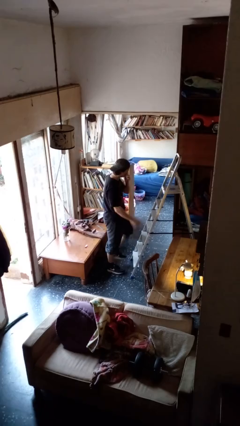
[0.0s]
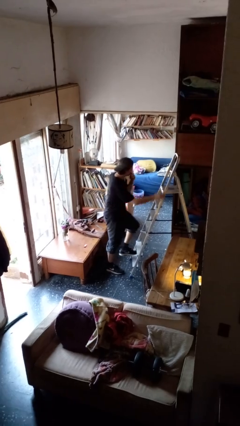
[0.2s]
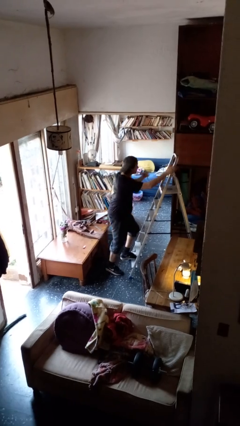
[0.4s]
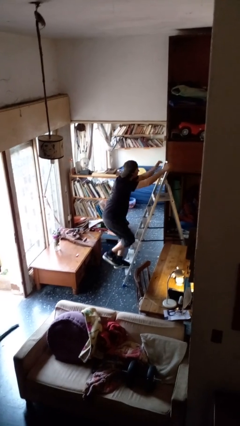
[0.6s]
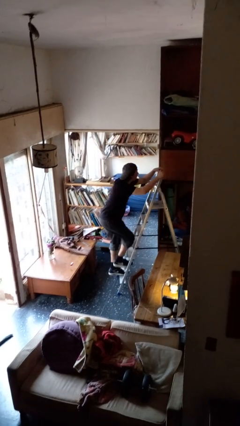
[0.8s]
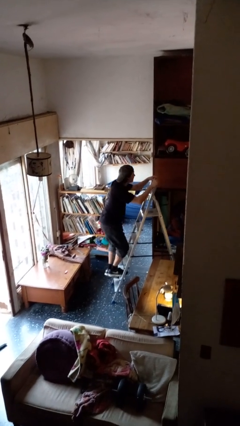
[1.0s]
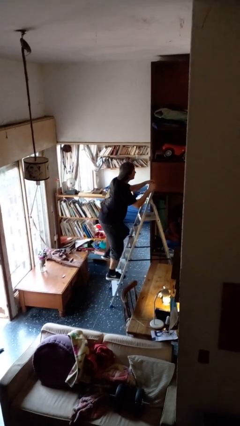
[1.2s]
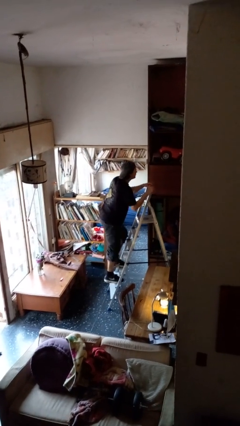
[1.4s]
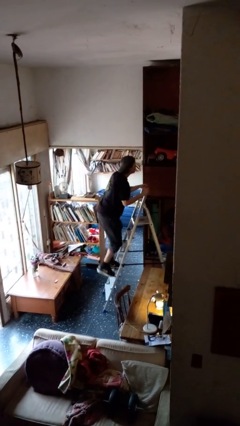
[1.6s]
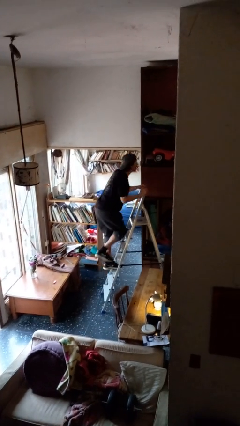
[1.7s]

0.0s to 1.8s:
person climbs up ladder

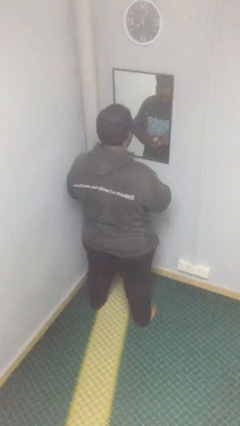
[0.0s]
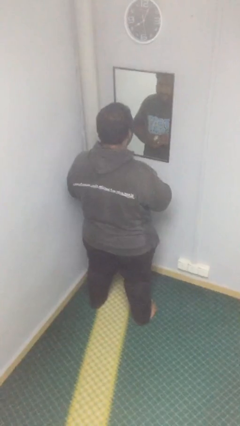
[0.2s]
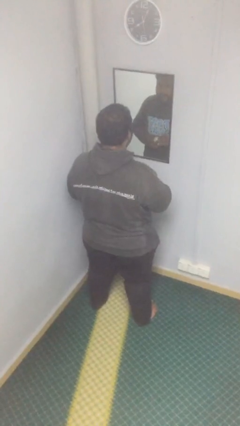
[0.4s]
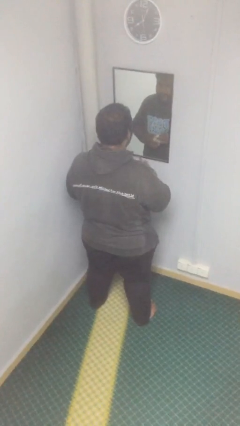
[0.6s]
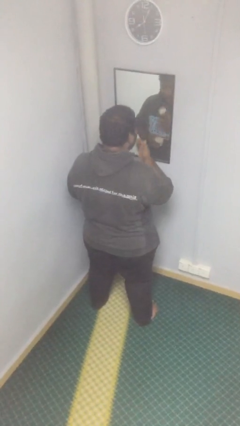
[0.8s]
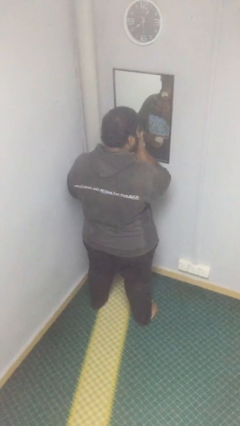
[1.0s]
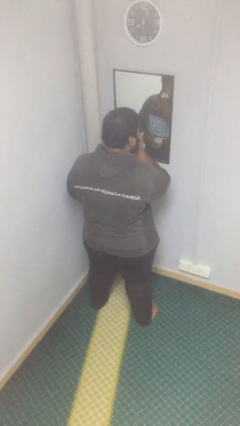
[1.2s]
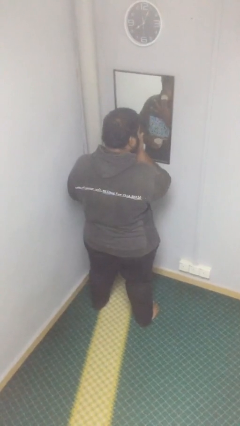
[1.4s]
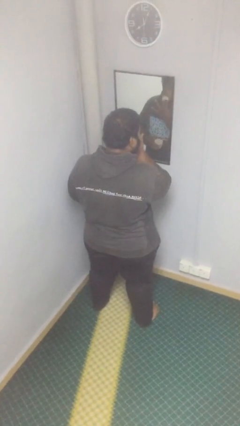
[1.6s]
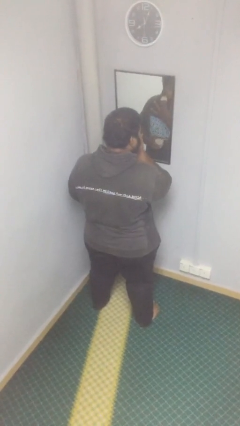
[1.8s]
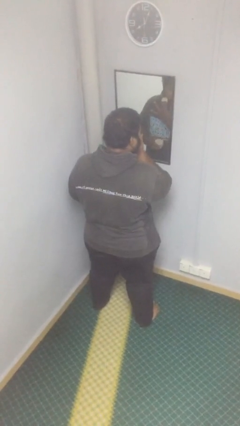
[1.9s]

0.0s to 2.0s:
person applies foundation makeup

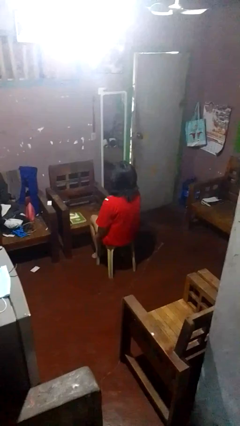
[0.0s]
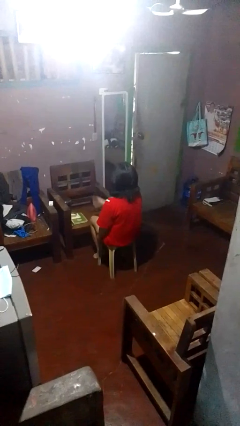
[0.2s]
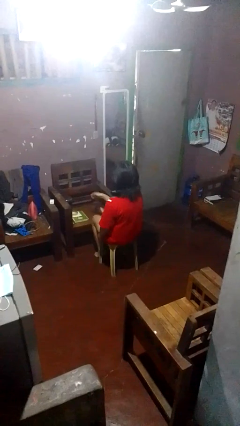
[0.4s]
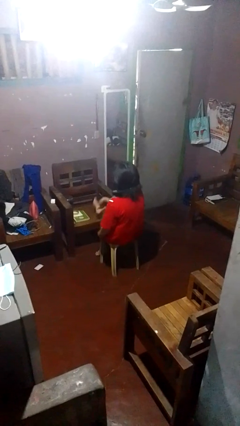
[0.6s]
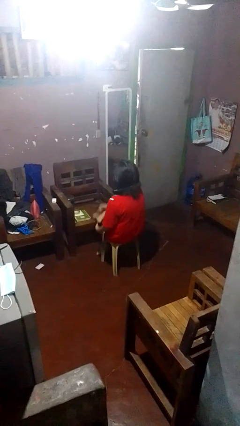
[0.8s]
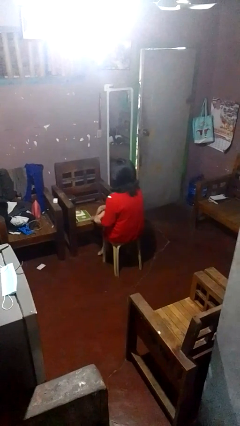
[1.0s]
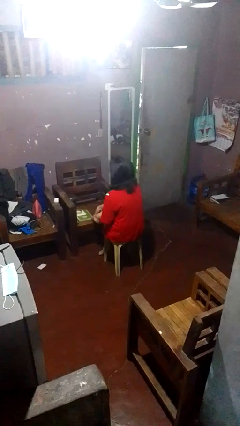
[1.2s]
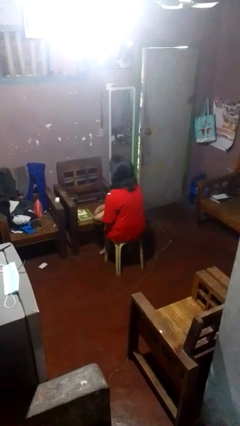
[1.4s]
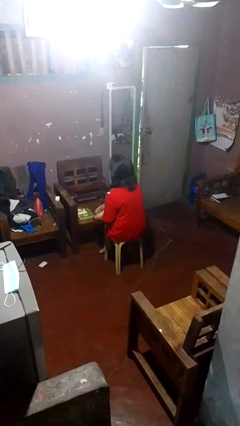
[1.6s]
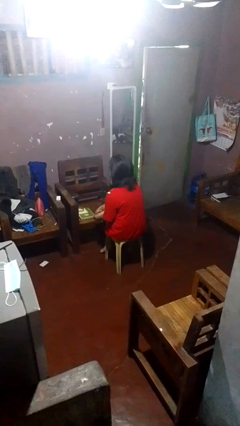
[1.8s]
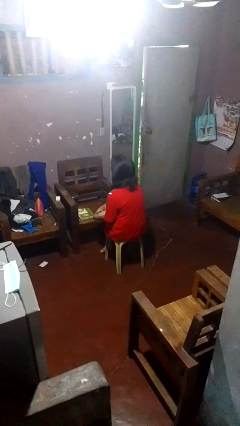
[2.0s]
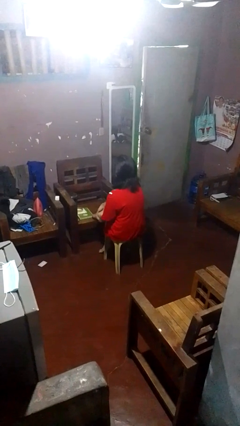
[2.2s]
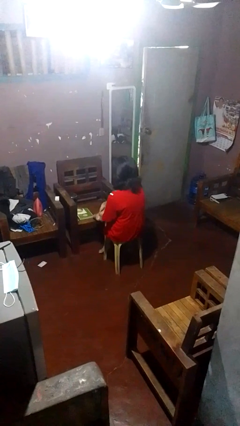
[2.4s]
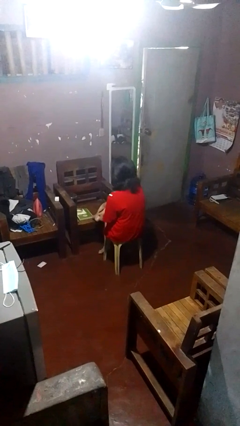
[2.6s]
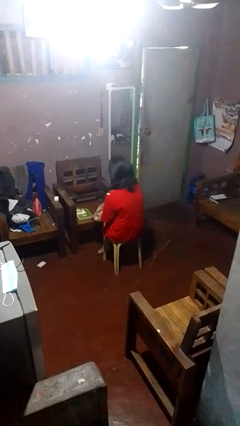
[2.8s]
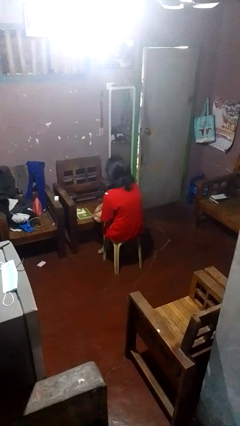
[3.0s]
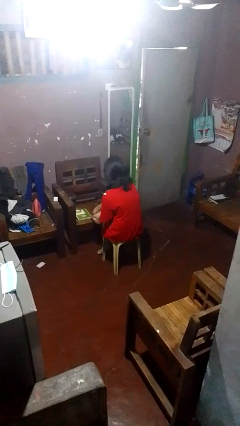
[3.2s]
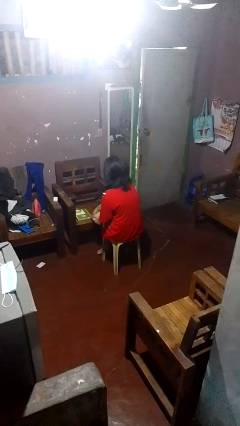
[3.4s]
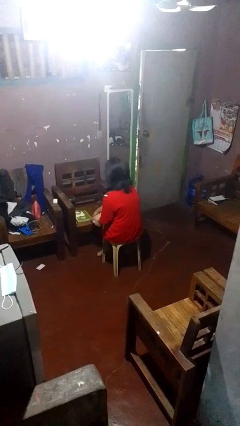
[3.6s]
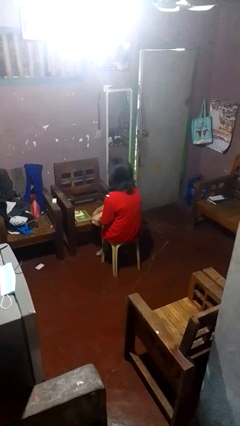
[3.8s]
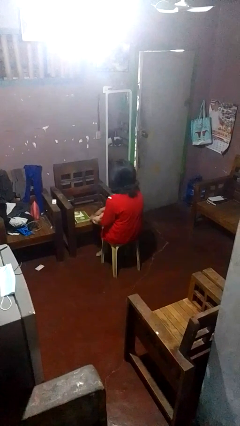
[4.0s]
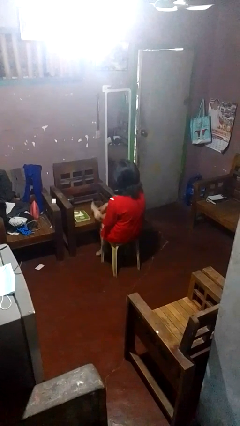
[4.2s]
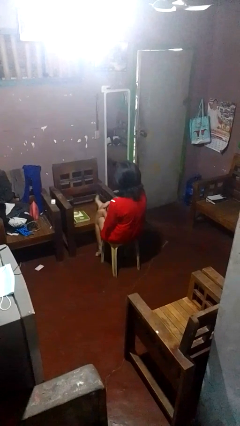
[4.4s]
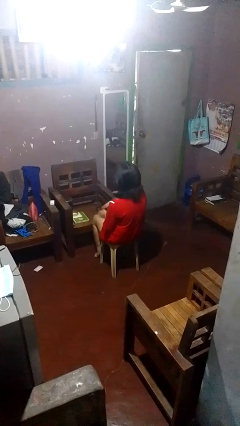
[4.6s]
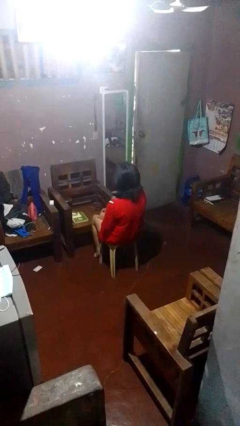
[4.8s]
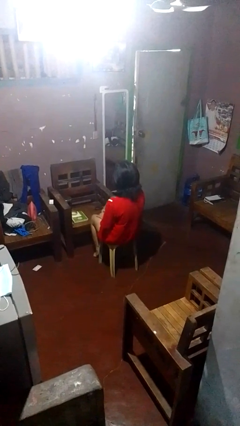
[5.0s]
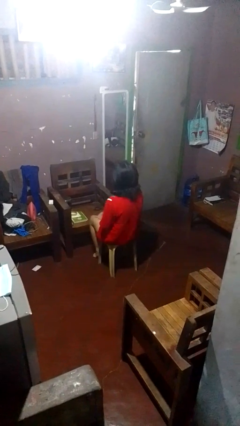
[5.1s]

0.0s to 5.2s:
person rubs foot

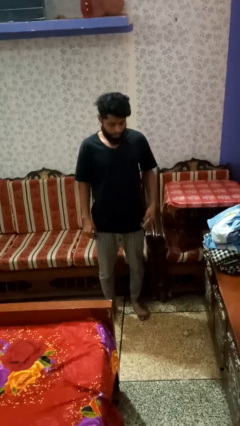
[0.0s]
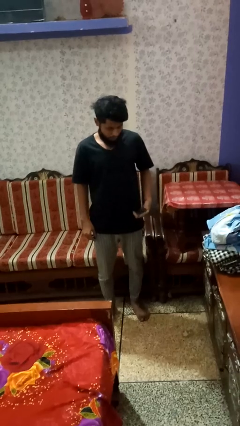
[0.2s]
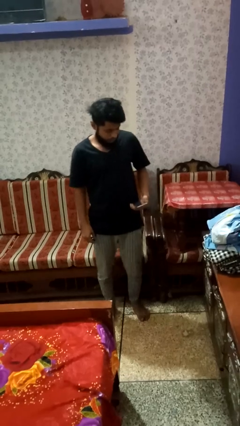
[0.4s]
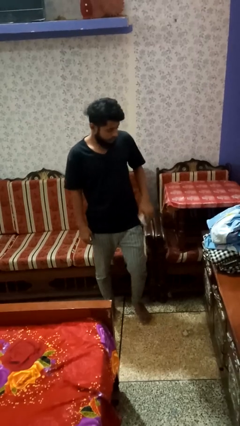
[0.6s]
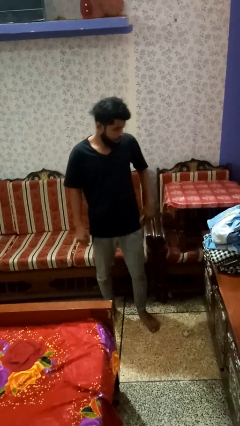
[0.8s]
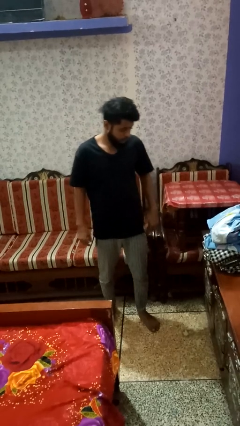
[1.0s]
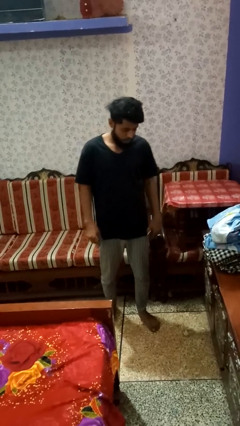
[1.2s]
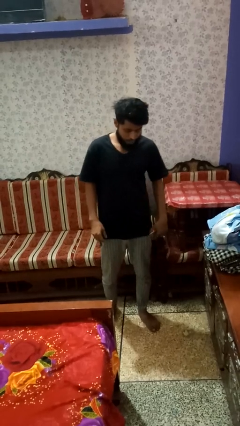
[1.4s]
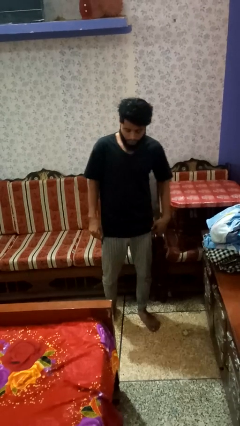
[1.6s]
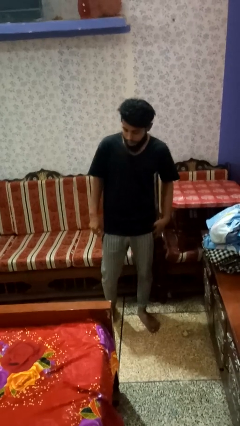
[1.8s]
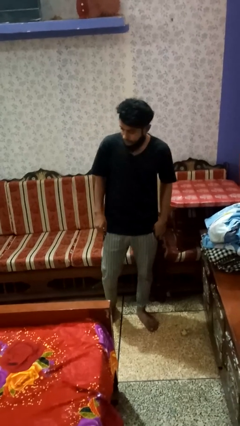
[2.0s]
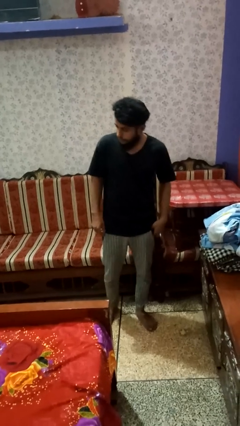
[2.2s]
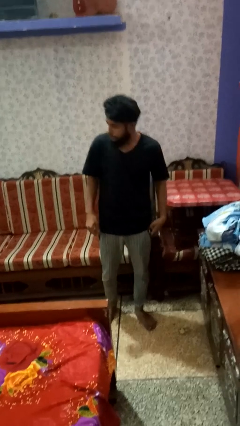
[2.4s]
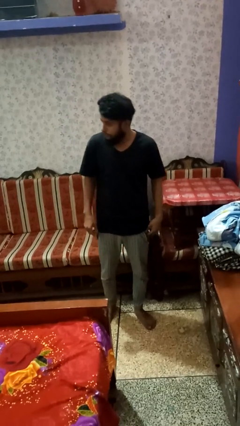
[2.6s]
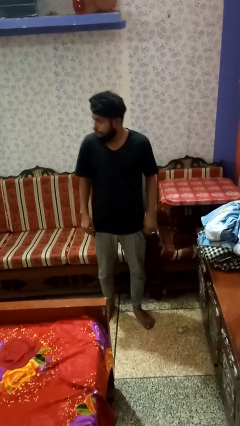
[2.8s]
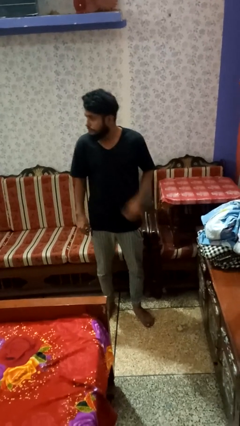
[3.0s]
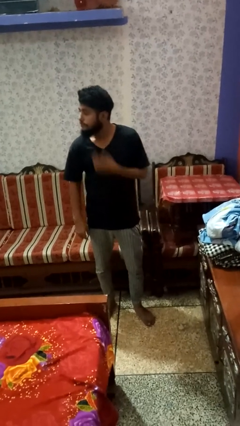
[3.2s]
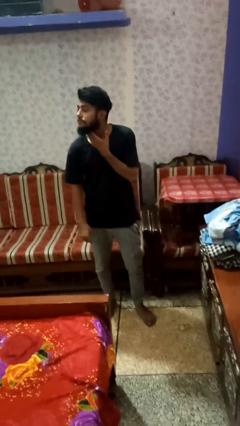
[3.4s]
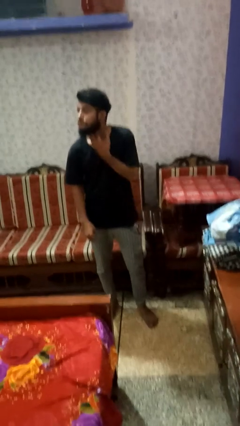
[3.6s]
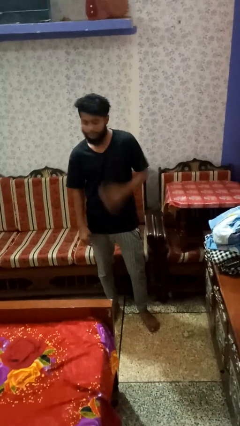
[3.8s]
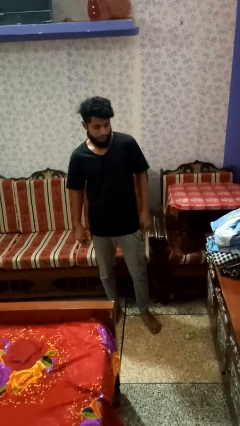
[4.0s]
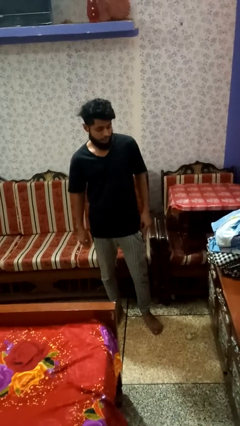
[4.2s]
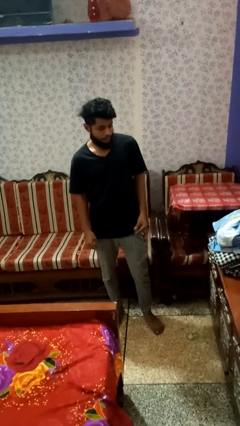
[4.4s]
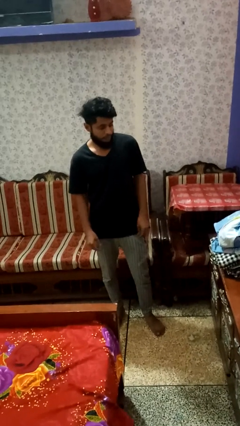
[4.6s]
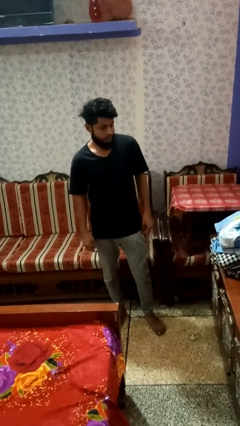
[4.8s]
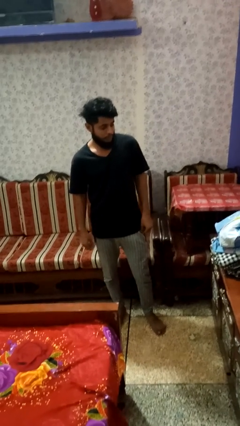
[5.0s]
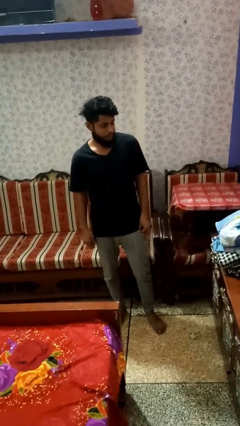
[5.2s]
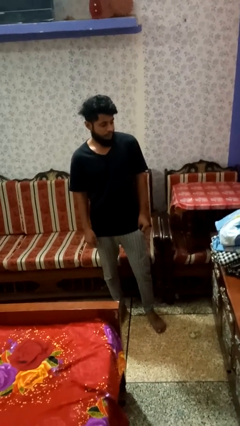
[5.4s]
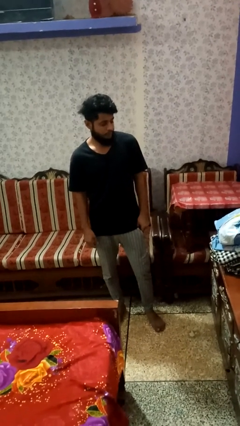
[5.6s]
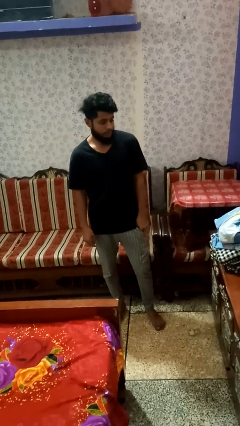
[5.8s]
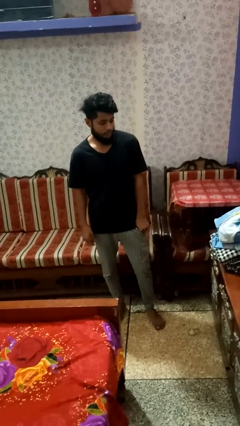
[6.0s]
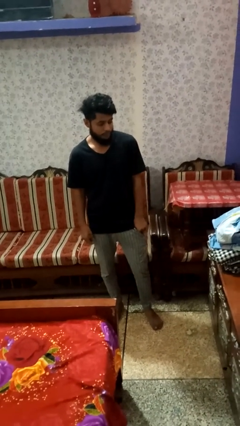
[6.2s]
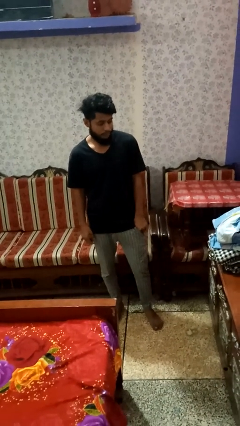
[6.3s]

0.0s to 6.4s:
person puts phone into pocket

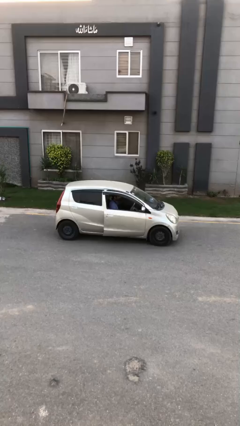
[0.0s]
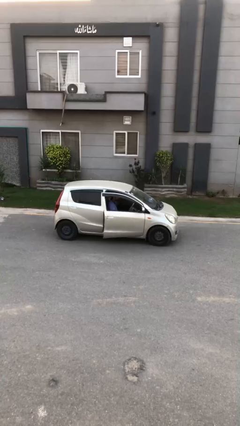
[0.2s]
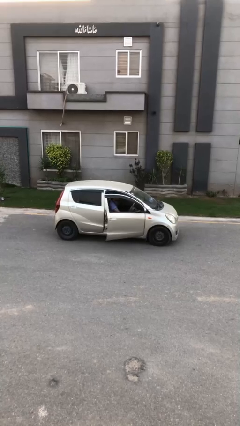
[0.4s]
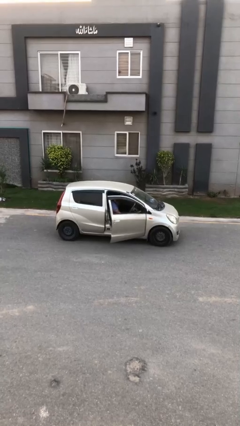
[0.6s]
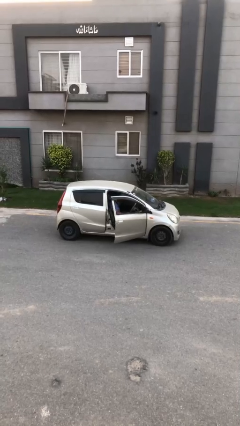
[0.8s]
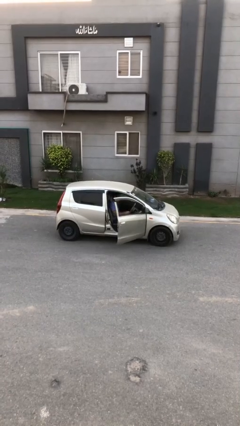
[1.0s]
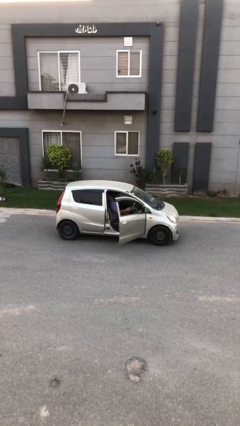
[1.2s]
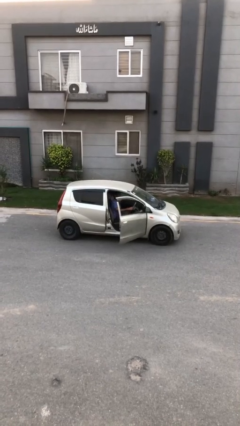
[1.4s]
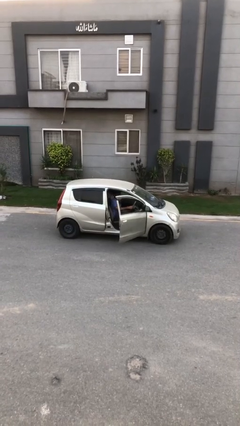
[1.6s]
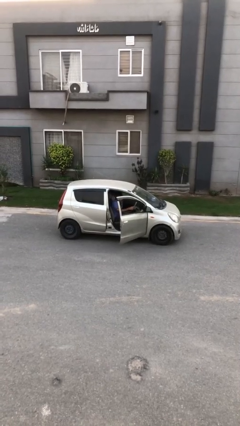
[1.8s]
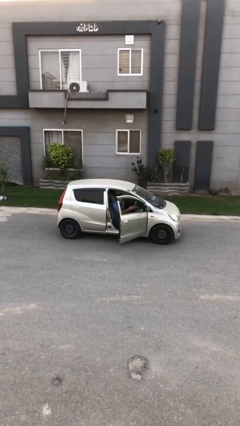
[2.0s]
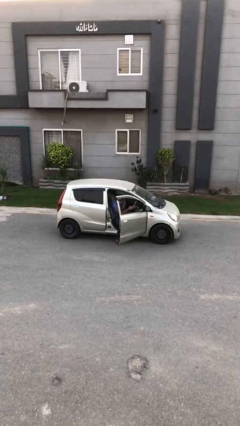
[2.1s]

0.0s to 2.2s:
person opens car door

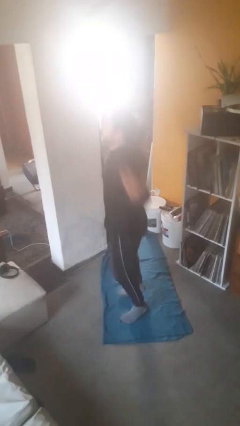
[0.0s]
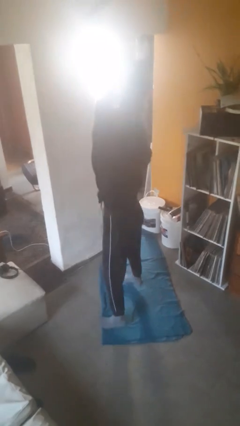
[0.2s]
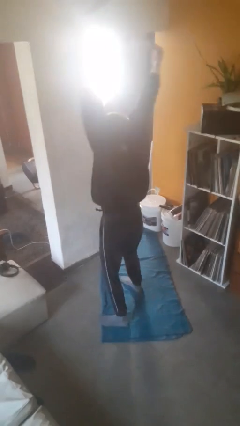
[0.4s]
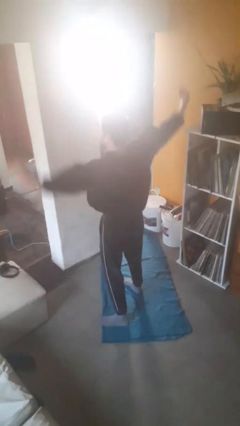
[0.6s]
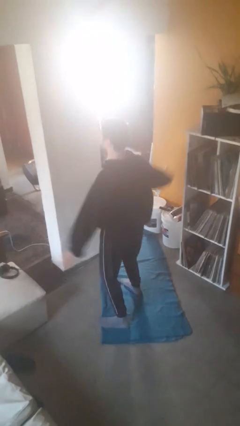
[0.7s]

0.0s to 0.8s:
person exercises with jumping jacks
